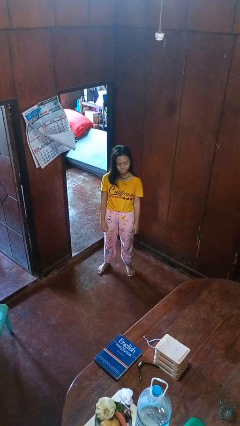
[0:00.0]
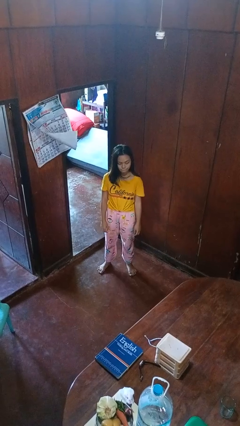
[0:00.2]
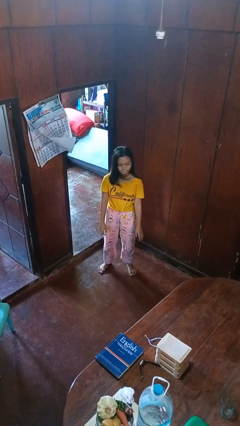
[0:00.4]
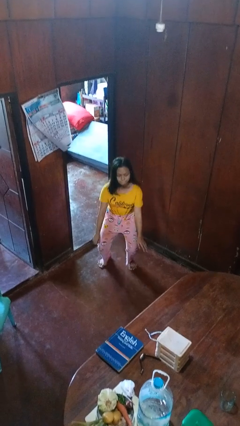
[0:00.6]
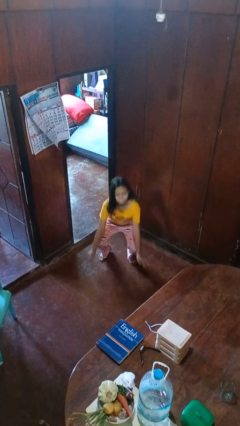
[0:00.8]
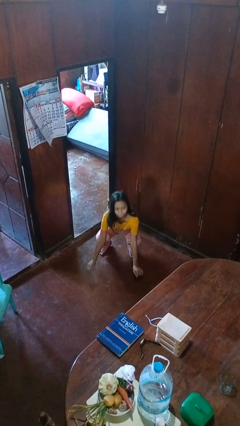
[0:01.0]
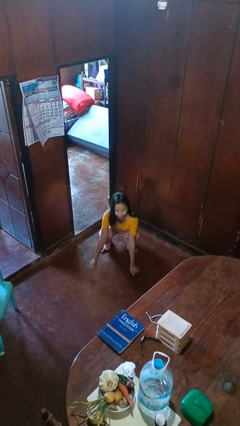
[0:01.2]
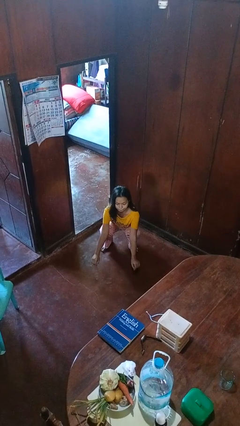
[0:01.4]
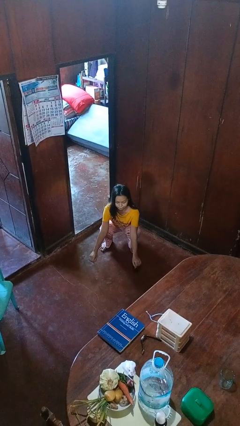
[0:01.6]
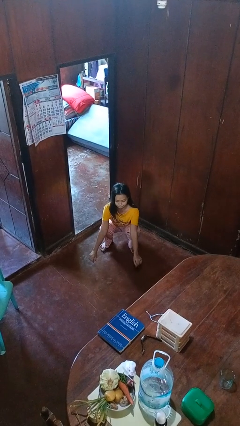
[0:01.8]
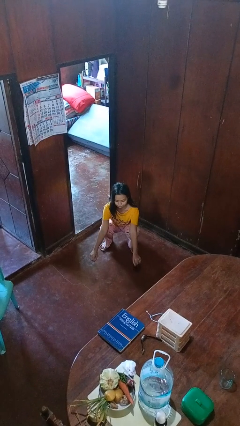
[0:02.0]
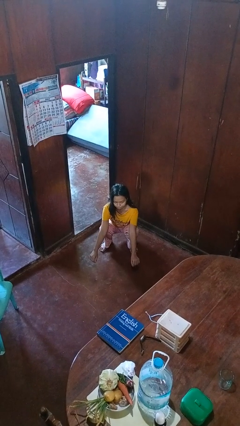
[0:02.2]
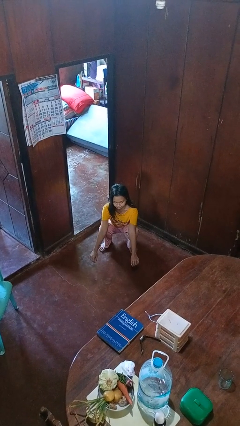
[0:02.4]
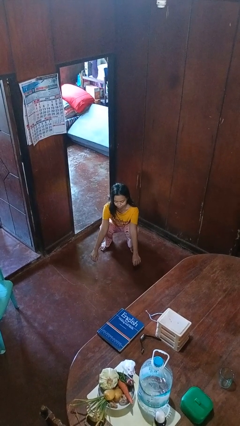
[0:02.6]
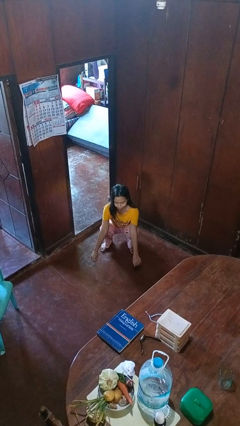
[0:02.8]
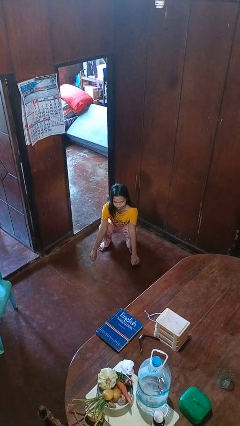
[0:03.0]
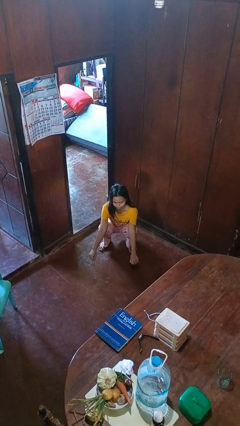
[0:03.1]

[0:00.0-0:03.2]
person squats

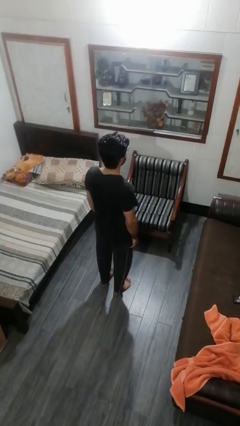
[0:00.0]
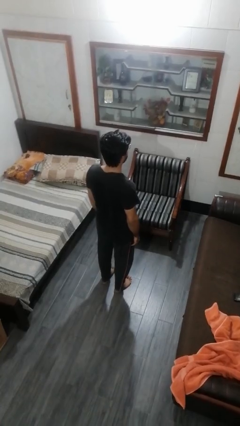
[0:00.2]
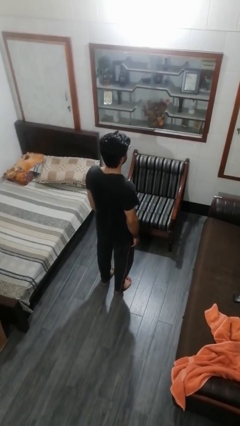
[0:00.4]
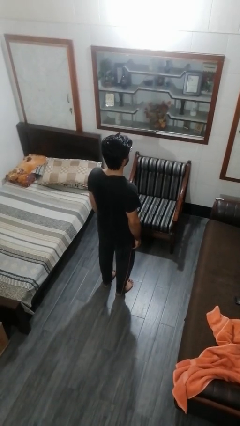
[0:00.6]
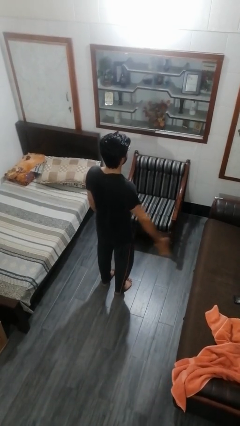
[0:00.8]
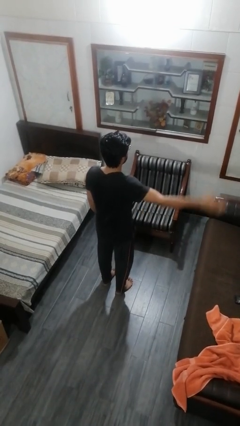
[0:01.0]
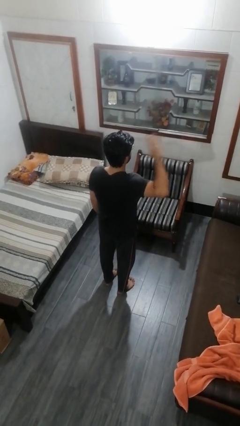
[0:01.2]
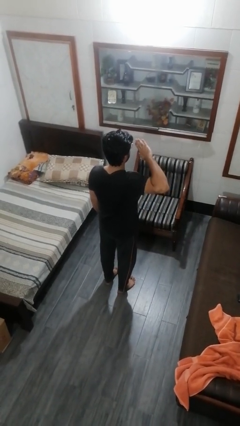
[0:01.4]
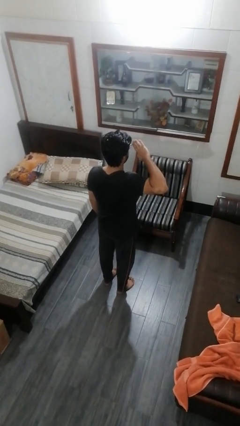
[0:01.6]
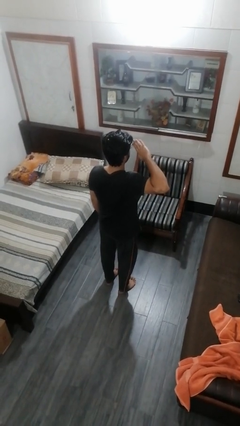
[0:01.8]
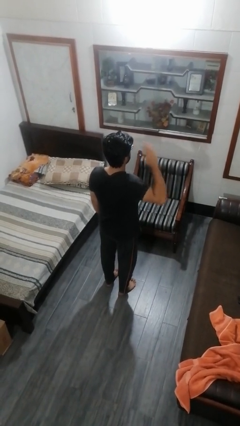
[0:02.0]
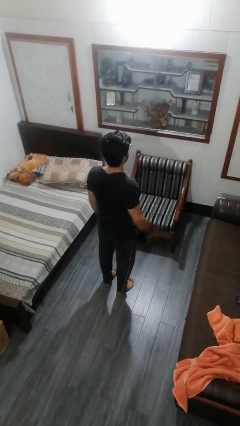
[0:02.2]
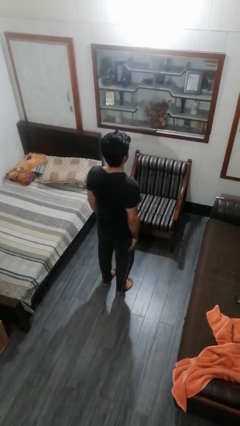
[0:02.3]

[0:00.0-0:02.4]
person salutes

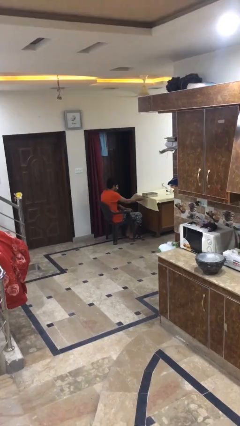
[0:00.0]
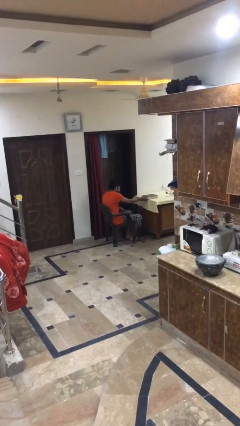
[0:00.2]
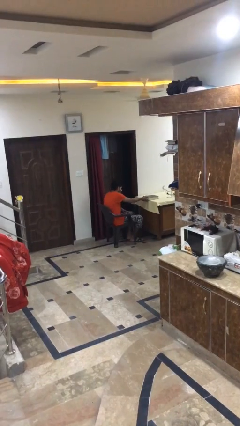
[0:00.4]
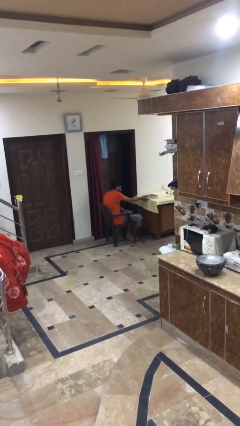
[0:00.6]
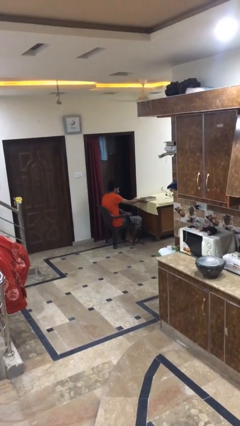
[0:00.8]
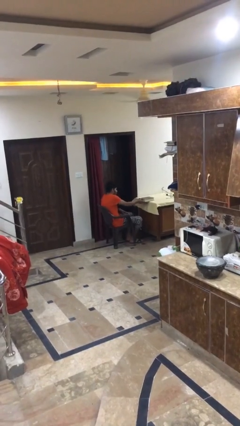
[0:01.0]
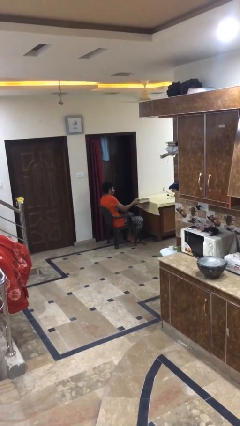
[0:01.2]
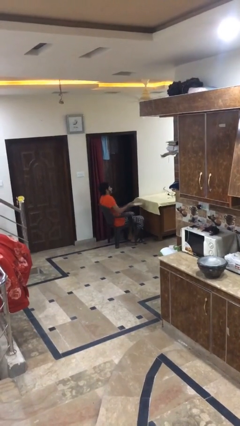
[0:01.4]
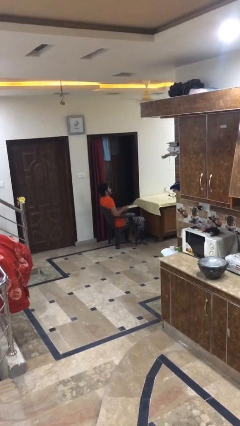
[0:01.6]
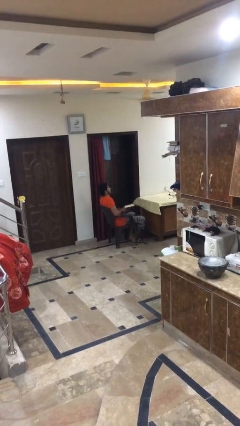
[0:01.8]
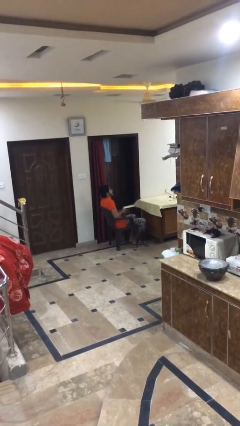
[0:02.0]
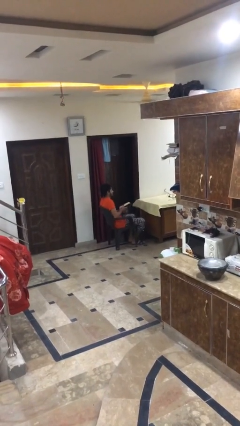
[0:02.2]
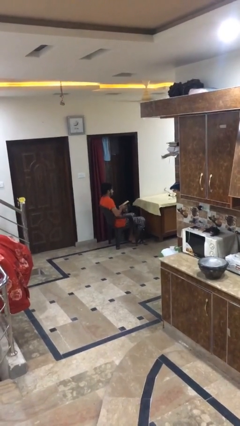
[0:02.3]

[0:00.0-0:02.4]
person picks up object from table

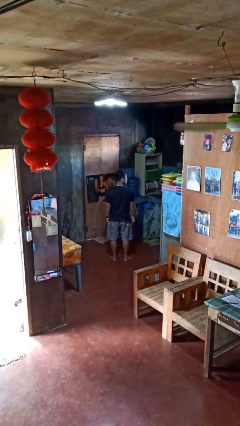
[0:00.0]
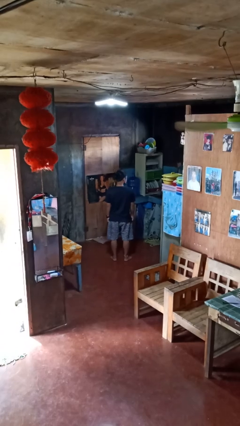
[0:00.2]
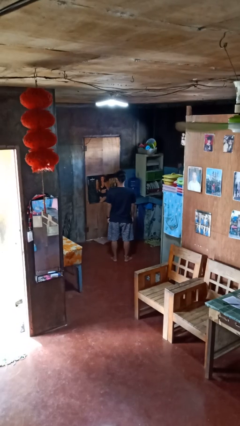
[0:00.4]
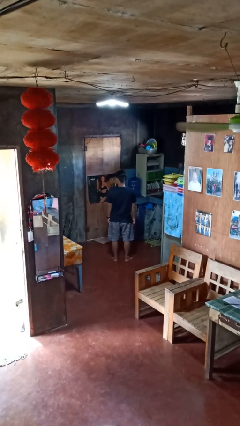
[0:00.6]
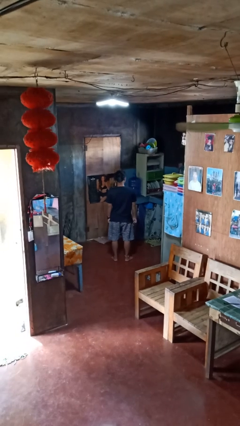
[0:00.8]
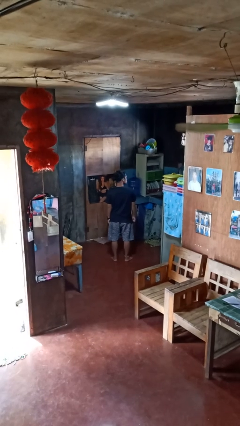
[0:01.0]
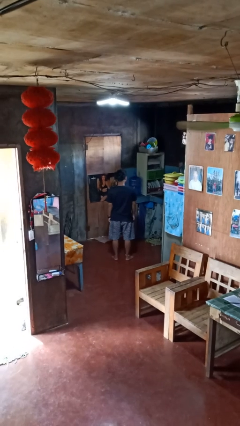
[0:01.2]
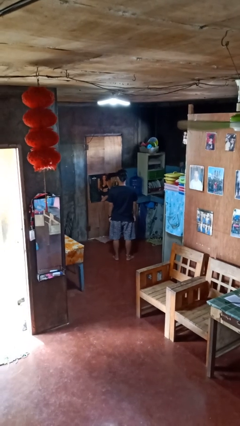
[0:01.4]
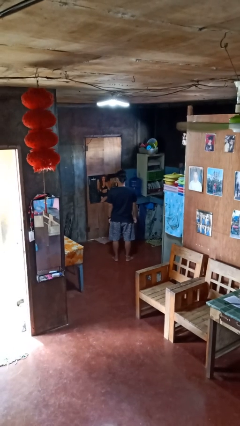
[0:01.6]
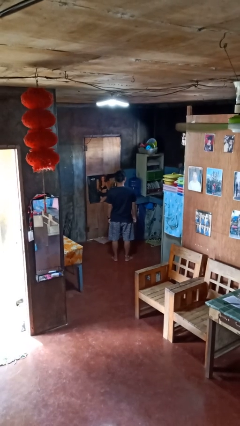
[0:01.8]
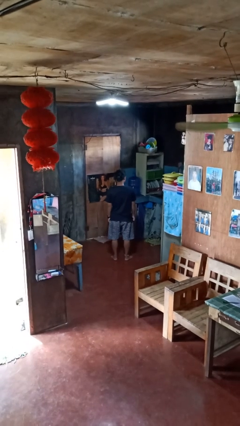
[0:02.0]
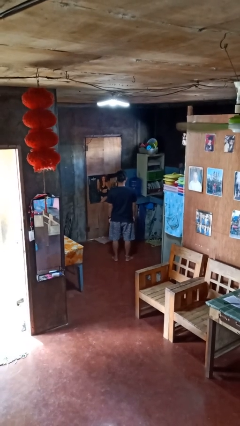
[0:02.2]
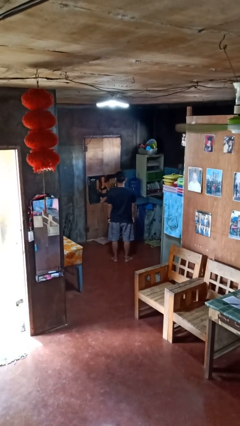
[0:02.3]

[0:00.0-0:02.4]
person shakes head

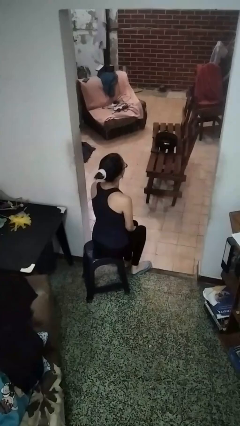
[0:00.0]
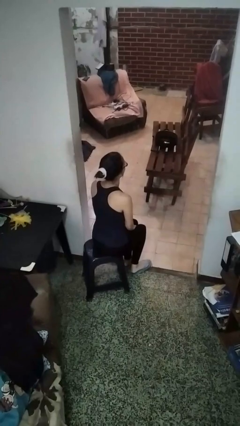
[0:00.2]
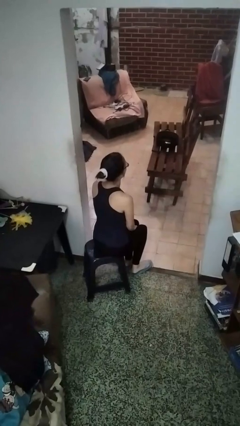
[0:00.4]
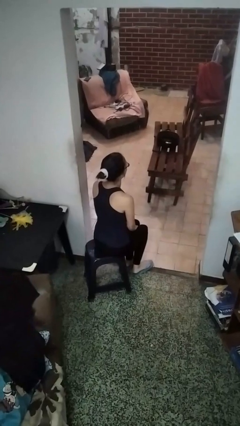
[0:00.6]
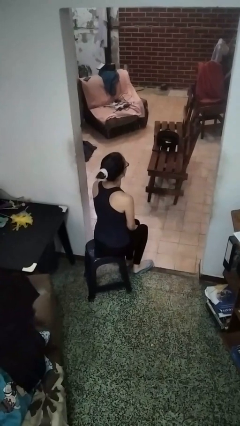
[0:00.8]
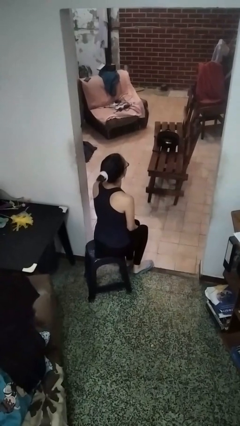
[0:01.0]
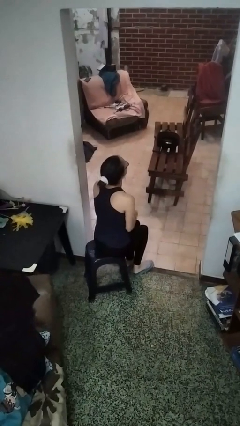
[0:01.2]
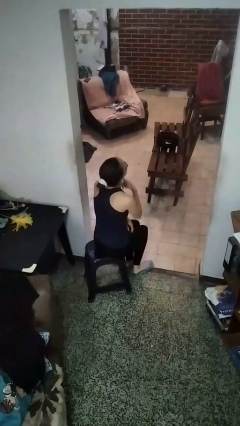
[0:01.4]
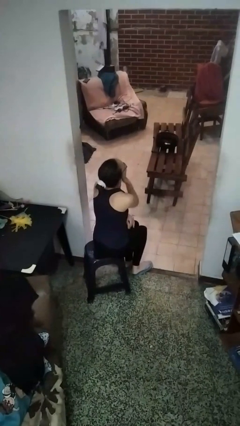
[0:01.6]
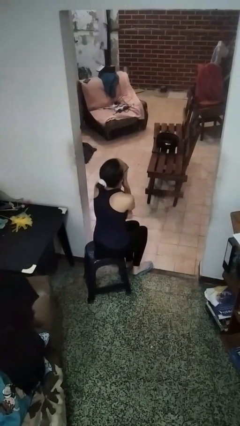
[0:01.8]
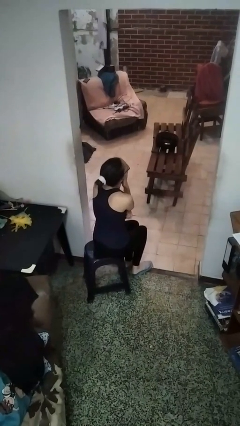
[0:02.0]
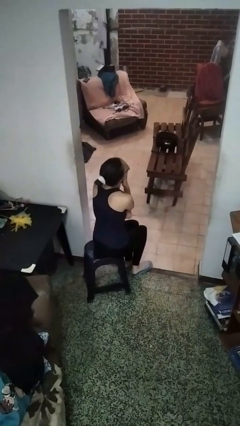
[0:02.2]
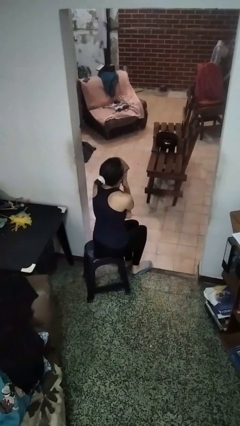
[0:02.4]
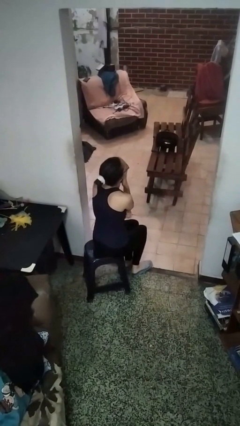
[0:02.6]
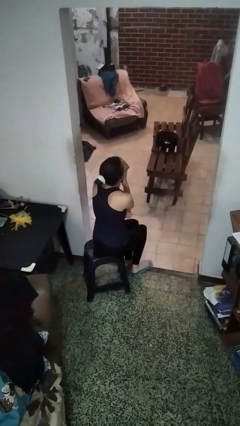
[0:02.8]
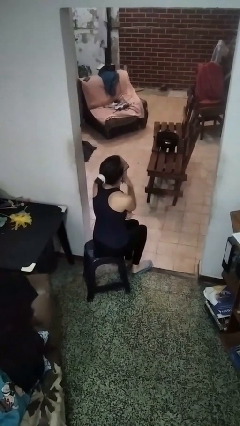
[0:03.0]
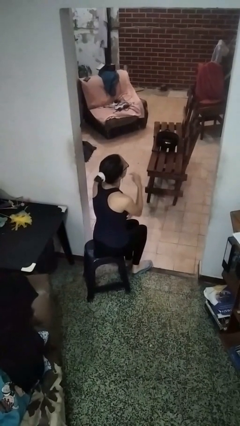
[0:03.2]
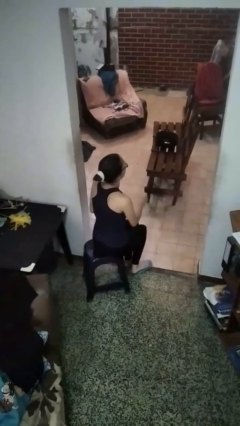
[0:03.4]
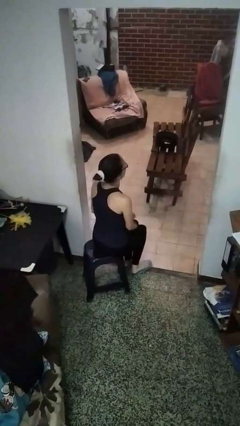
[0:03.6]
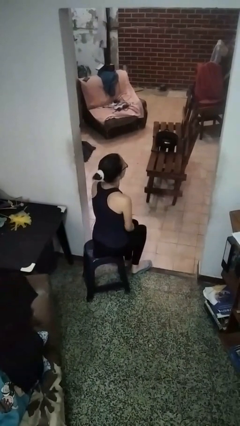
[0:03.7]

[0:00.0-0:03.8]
person strokes chin

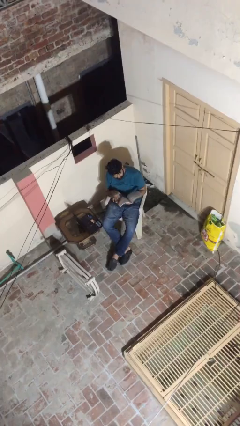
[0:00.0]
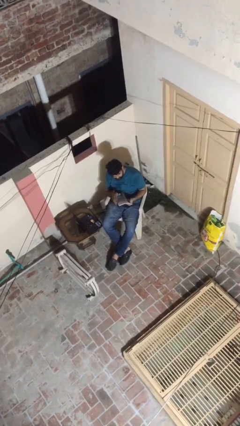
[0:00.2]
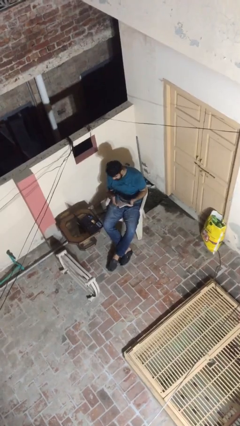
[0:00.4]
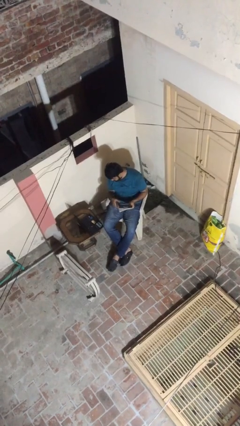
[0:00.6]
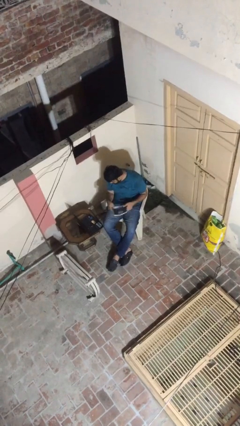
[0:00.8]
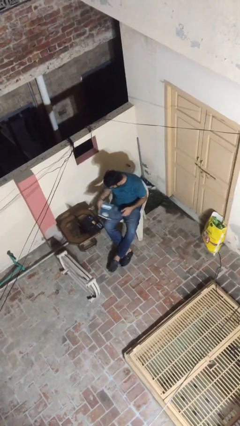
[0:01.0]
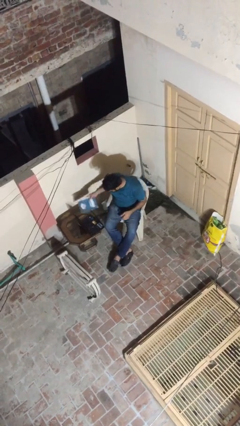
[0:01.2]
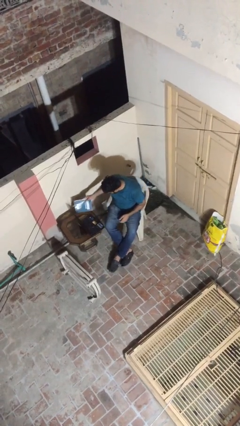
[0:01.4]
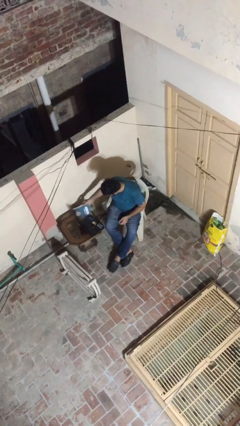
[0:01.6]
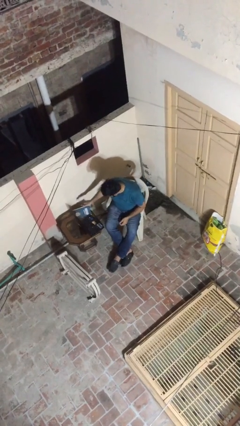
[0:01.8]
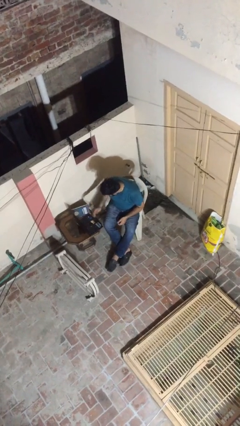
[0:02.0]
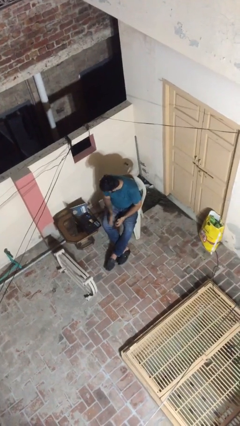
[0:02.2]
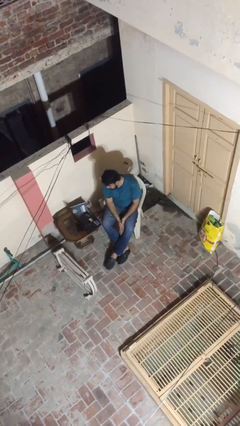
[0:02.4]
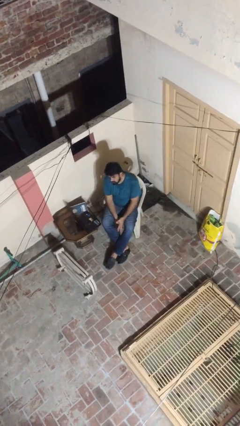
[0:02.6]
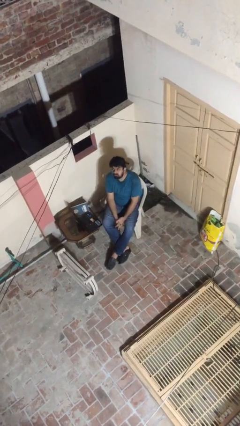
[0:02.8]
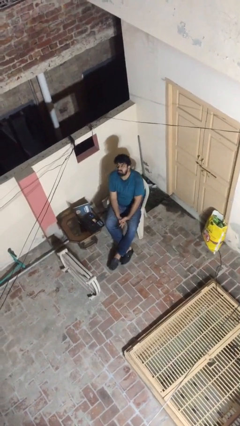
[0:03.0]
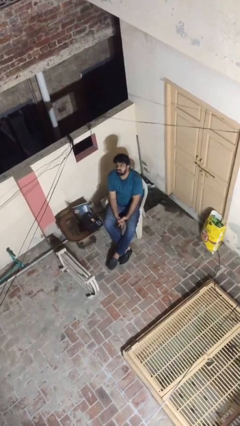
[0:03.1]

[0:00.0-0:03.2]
person puts down object on table
